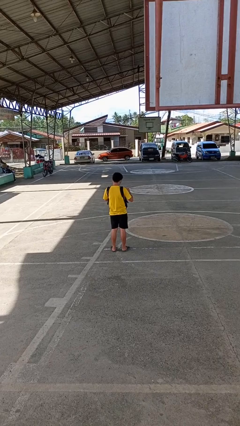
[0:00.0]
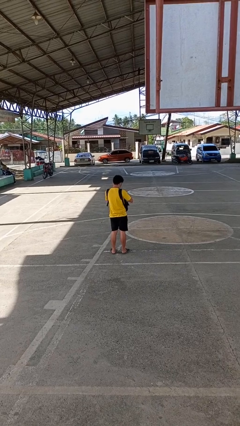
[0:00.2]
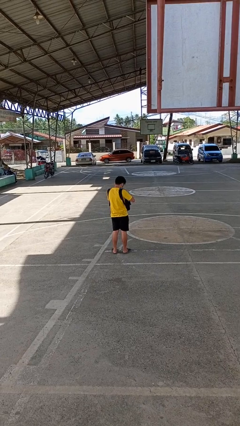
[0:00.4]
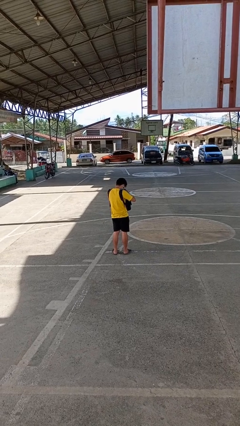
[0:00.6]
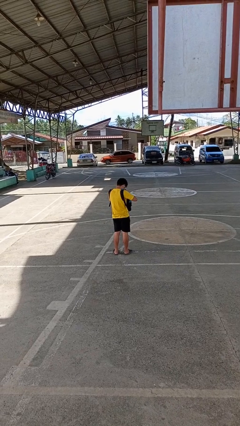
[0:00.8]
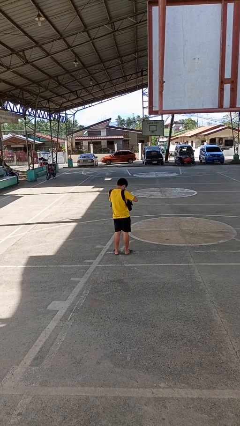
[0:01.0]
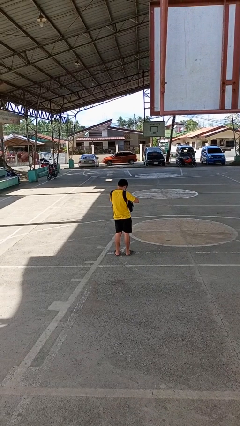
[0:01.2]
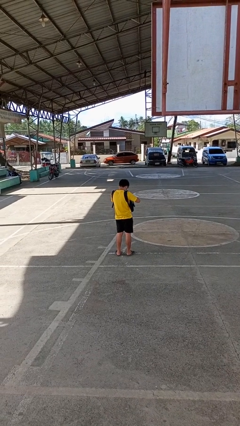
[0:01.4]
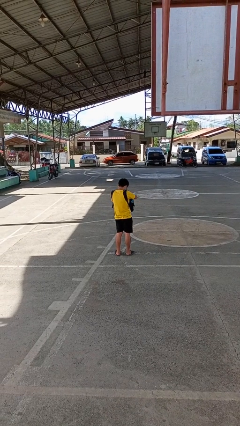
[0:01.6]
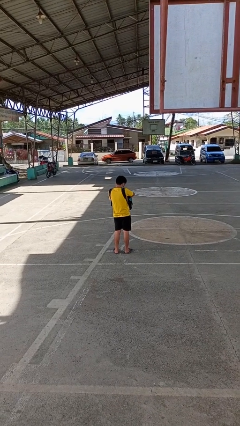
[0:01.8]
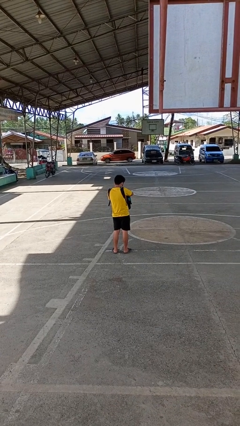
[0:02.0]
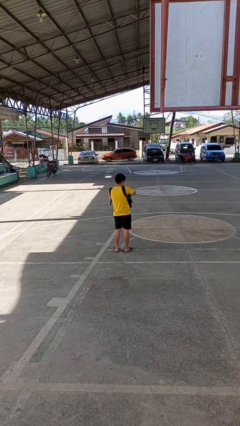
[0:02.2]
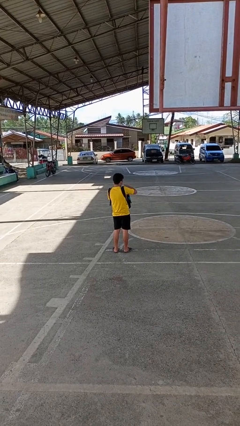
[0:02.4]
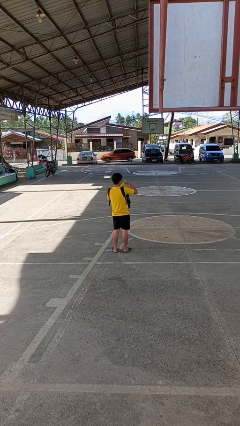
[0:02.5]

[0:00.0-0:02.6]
person searches in backpack

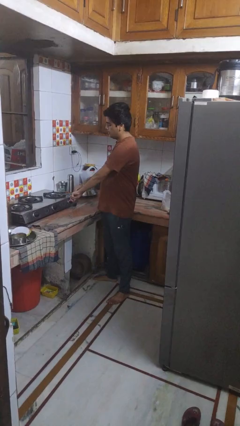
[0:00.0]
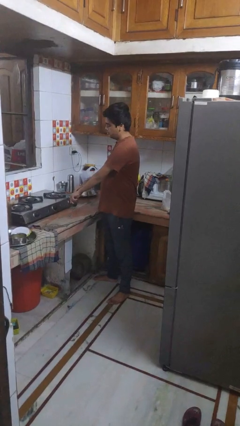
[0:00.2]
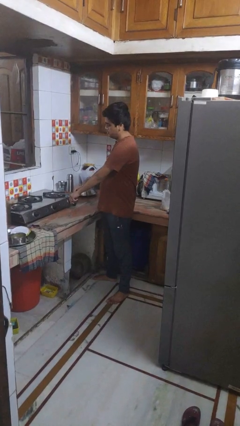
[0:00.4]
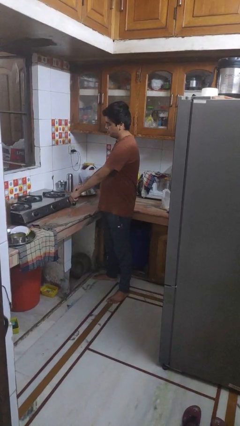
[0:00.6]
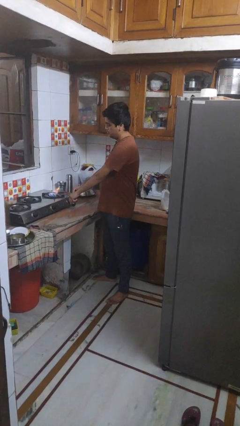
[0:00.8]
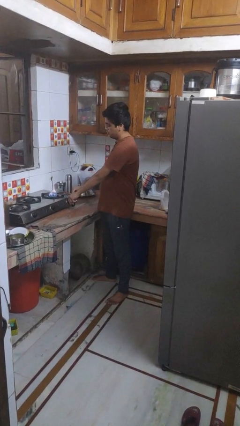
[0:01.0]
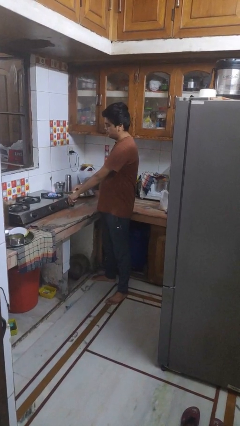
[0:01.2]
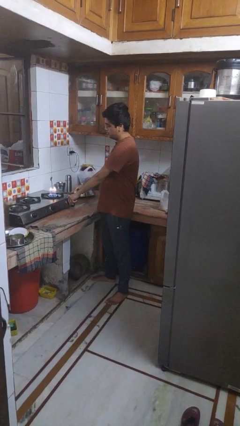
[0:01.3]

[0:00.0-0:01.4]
person turns on stovetop

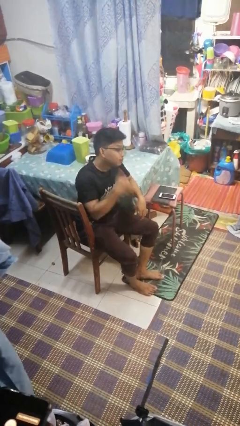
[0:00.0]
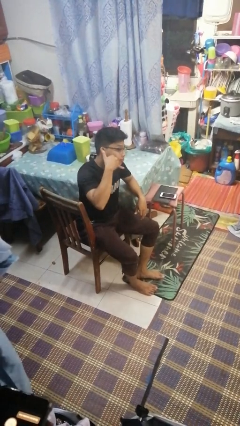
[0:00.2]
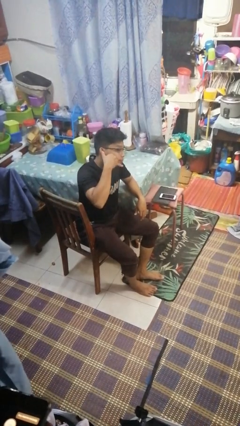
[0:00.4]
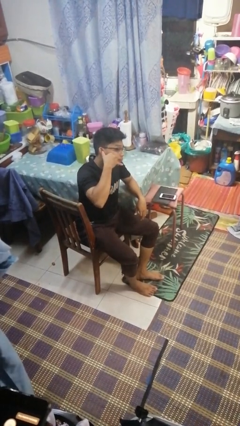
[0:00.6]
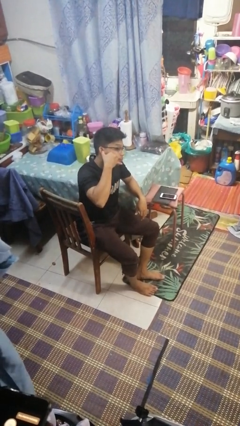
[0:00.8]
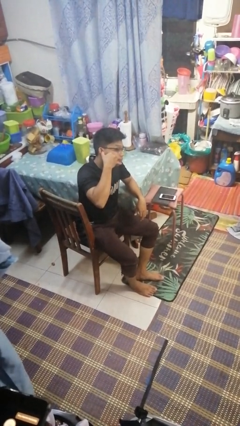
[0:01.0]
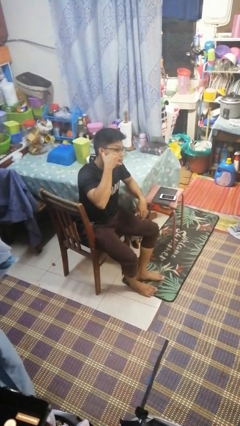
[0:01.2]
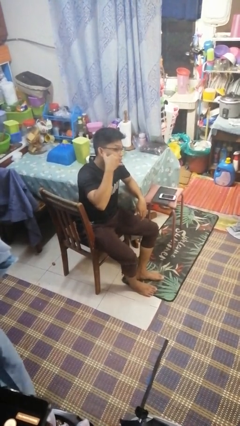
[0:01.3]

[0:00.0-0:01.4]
person gestures call me

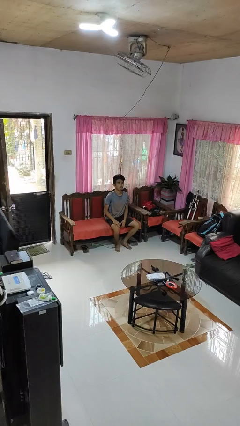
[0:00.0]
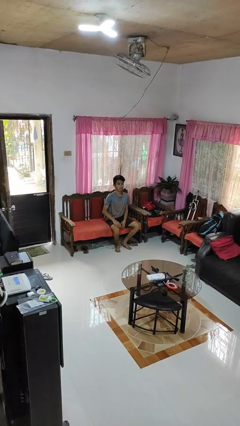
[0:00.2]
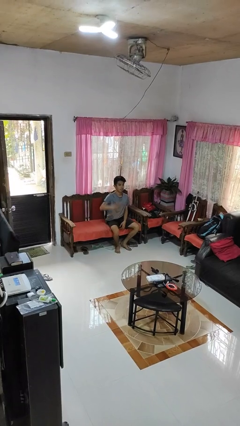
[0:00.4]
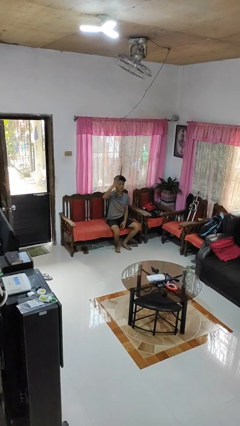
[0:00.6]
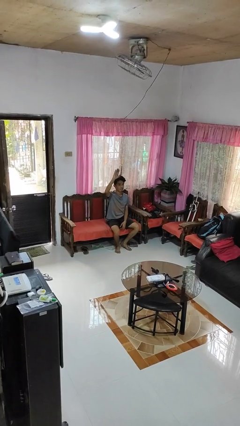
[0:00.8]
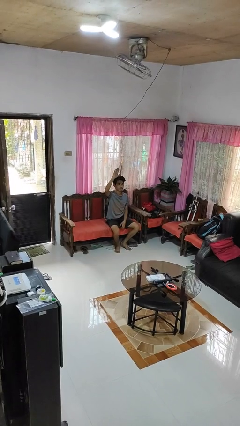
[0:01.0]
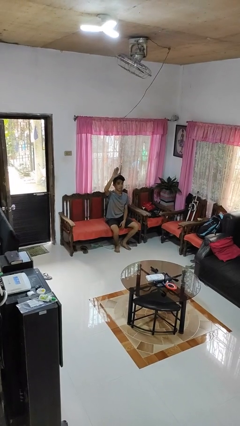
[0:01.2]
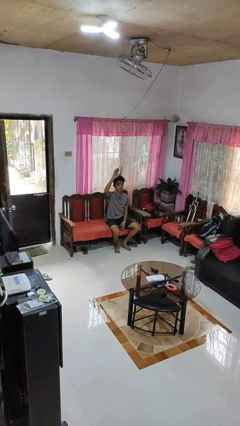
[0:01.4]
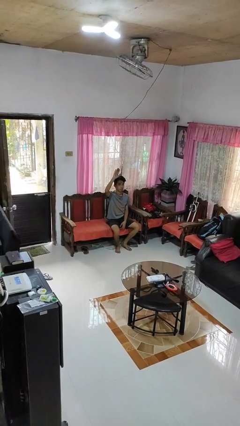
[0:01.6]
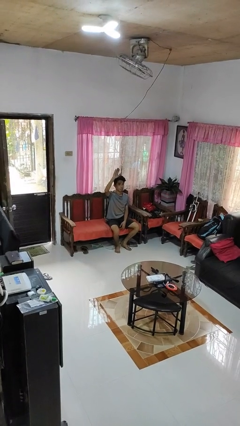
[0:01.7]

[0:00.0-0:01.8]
person gestures raise hand

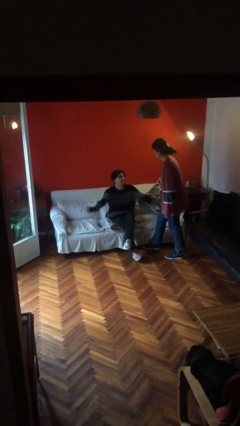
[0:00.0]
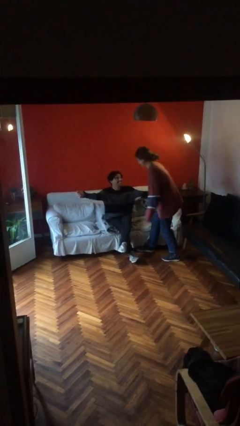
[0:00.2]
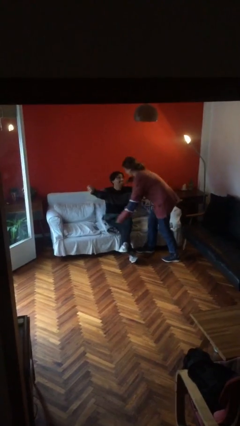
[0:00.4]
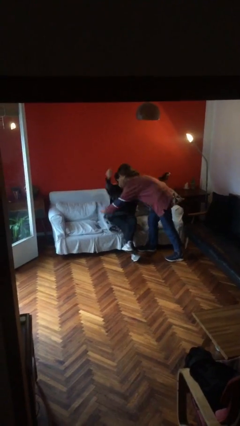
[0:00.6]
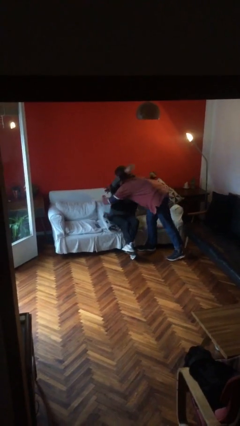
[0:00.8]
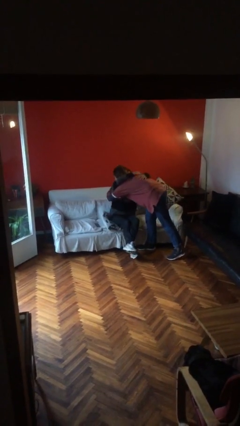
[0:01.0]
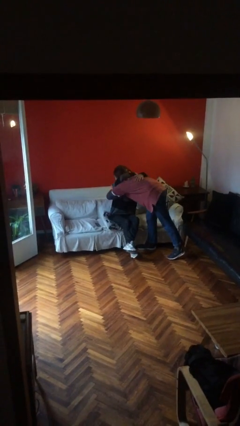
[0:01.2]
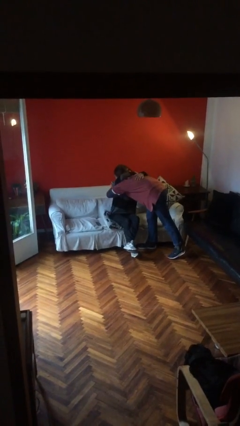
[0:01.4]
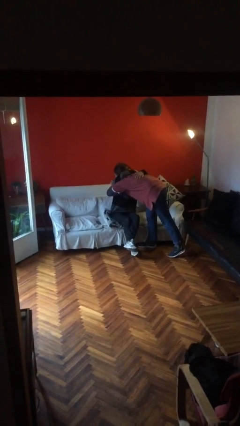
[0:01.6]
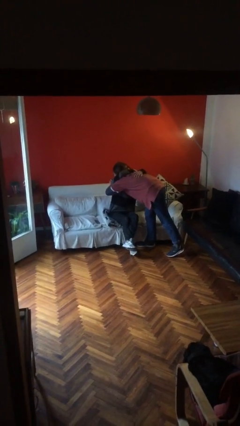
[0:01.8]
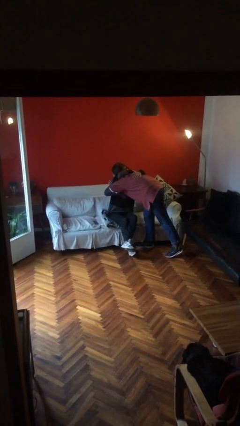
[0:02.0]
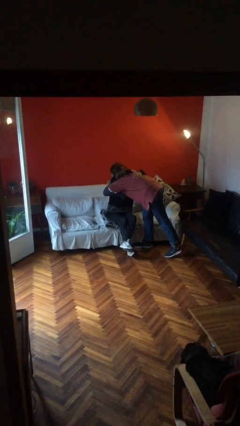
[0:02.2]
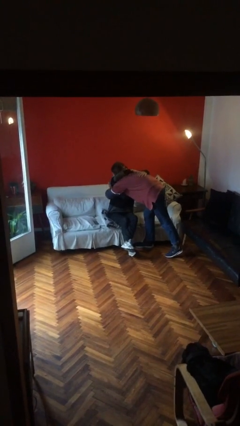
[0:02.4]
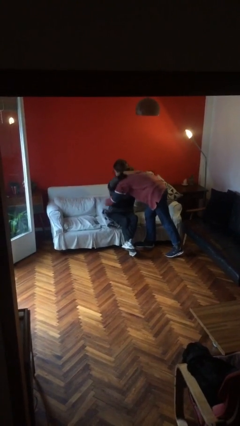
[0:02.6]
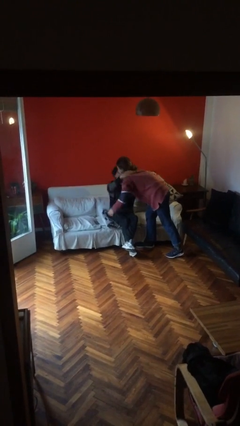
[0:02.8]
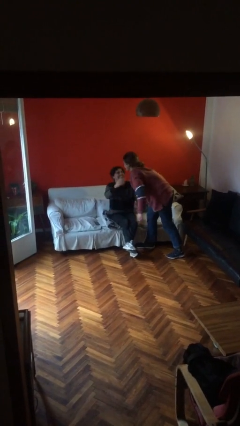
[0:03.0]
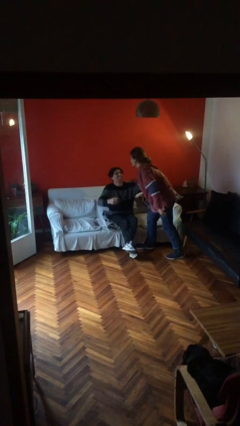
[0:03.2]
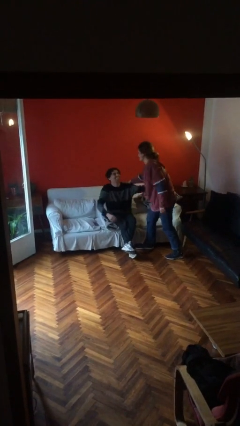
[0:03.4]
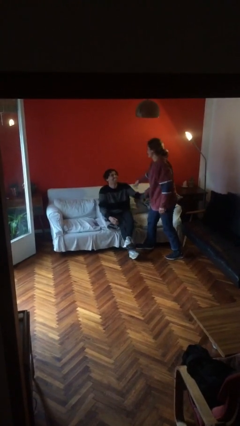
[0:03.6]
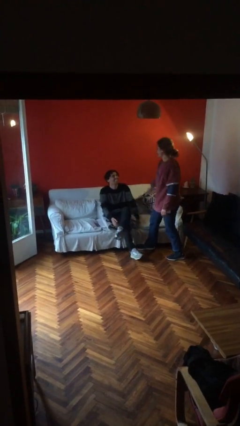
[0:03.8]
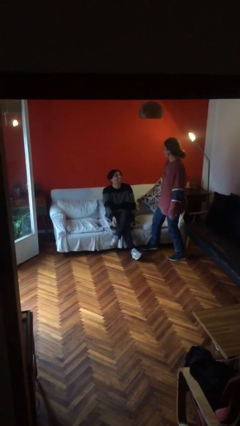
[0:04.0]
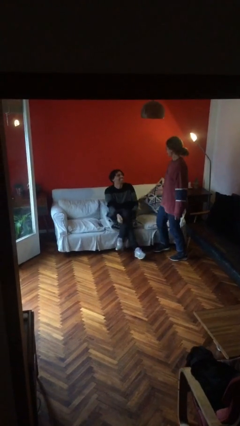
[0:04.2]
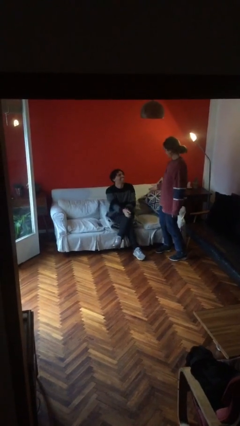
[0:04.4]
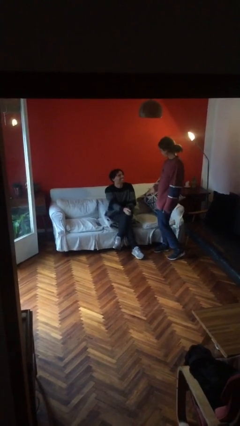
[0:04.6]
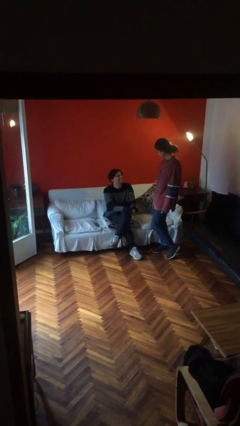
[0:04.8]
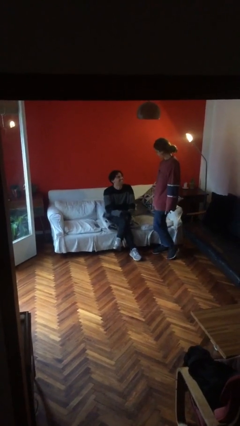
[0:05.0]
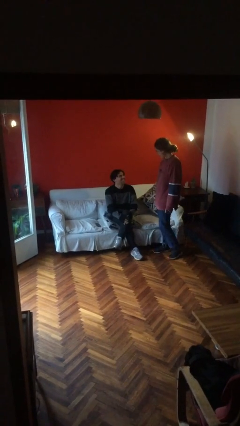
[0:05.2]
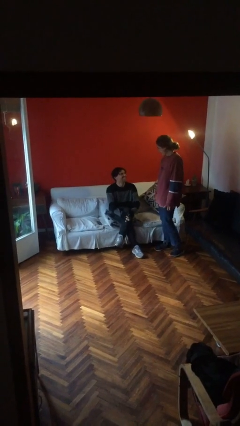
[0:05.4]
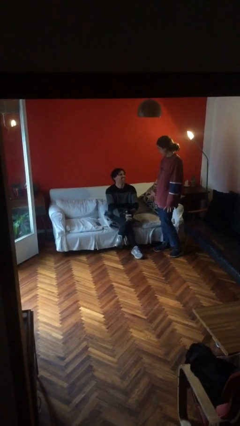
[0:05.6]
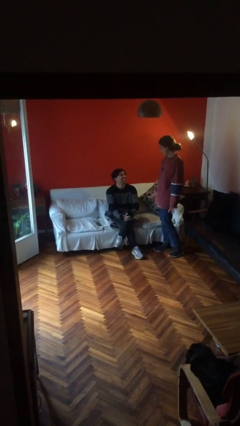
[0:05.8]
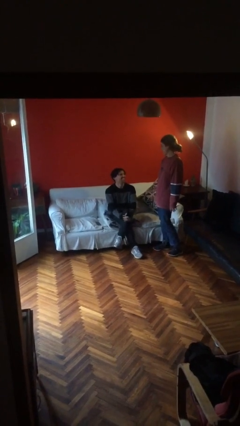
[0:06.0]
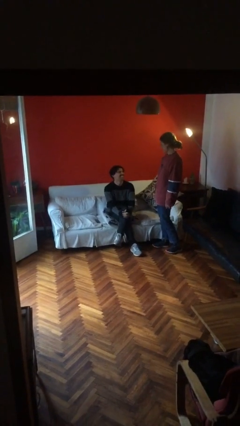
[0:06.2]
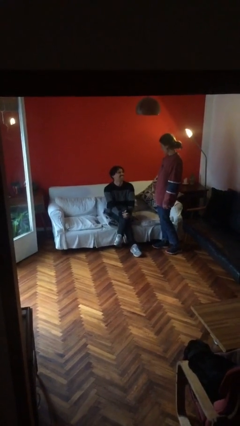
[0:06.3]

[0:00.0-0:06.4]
person embraces person

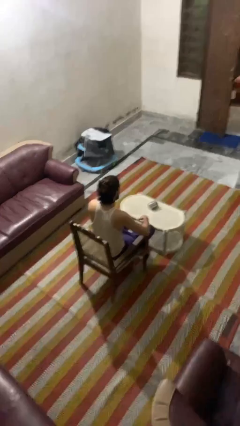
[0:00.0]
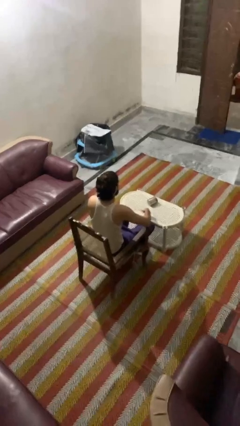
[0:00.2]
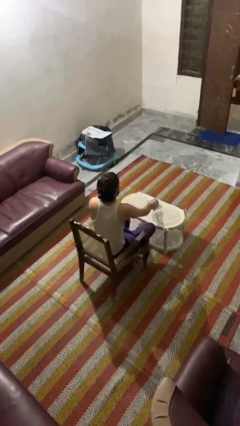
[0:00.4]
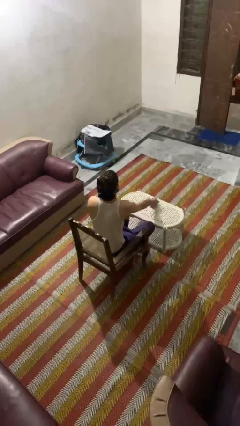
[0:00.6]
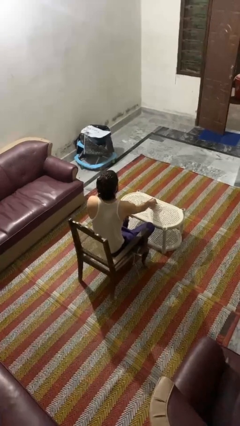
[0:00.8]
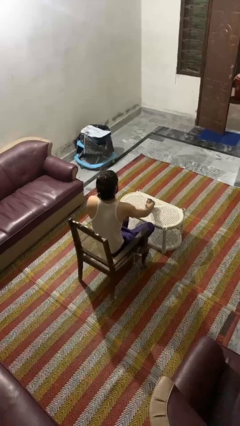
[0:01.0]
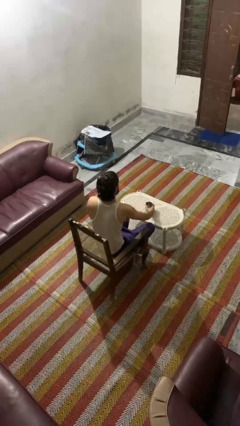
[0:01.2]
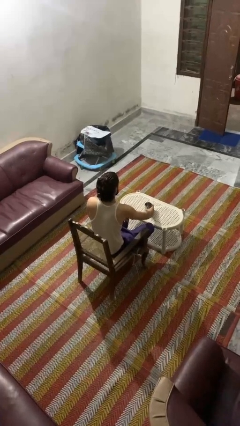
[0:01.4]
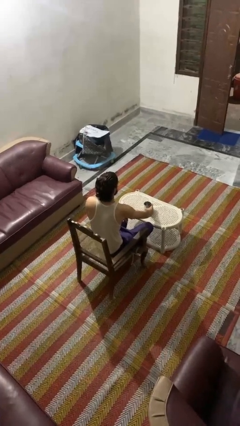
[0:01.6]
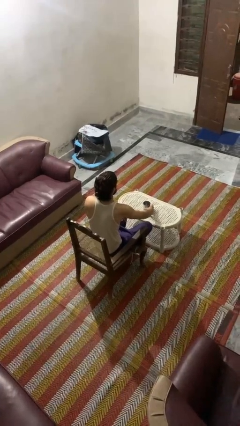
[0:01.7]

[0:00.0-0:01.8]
person sets upright furniture

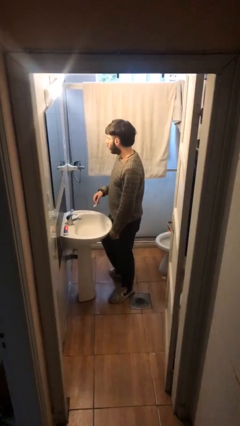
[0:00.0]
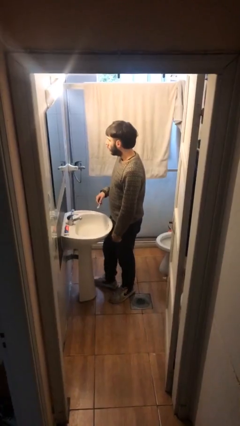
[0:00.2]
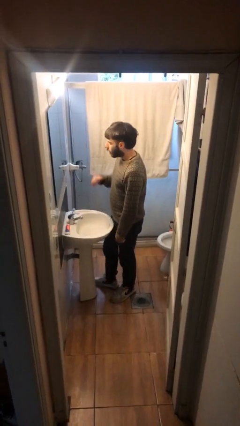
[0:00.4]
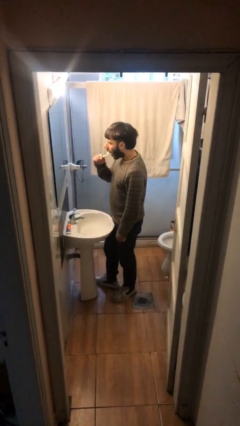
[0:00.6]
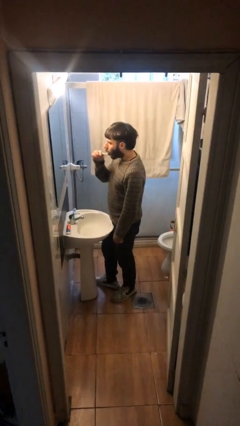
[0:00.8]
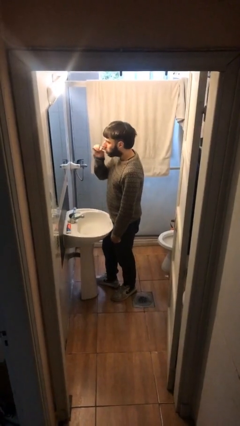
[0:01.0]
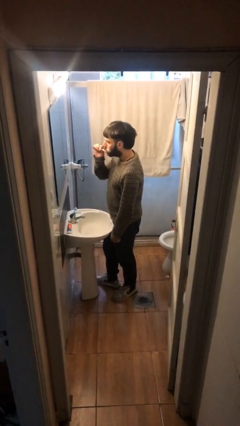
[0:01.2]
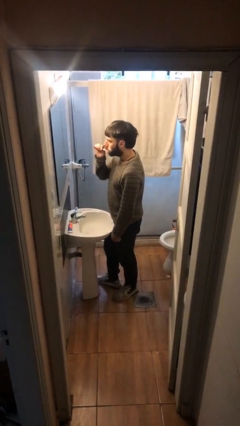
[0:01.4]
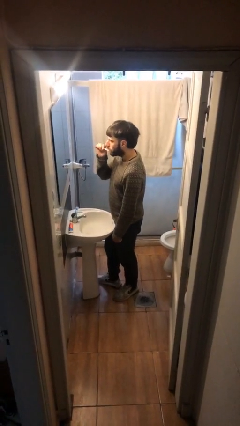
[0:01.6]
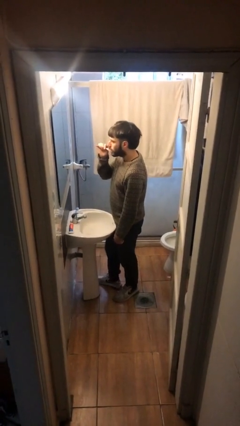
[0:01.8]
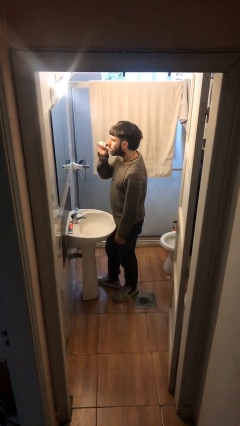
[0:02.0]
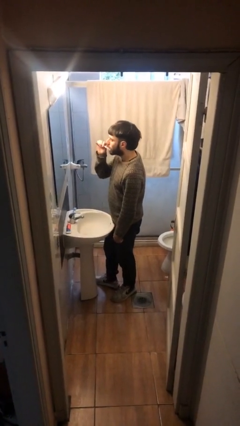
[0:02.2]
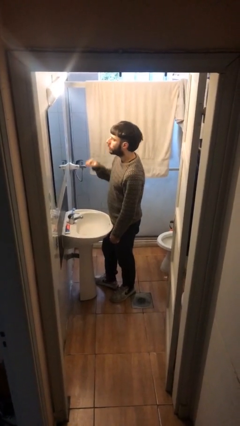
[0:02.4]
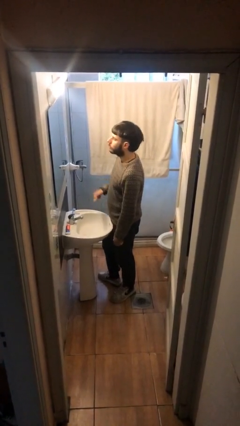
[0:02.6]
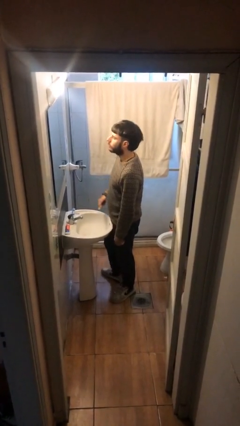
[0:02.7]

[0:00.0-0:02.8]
person brushes teeth
